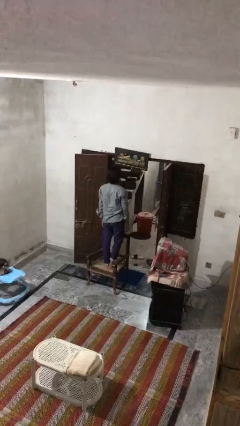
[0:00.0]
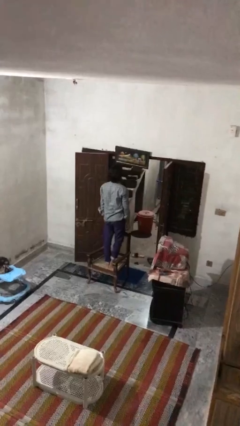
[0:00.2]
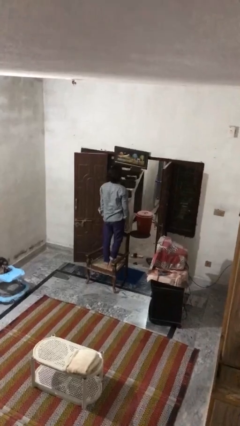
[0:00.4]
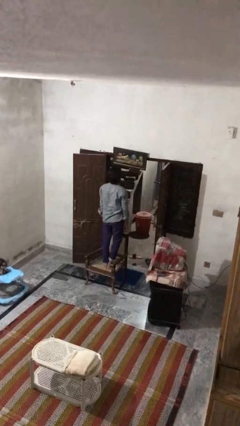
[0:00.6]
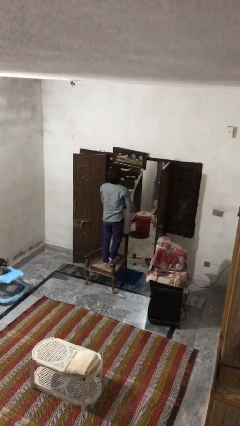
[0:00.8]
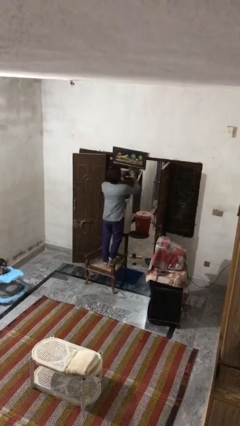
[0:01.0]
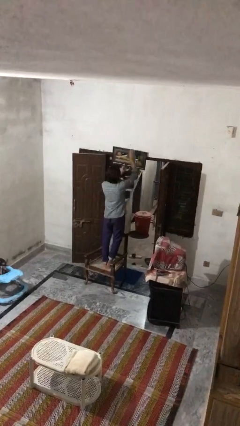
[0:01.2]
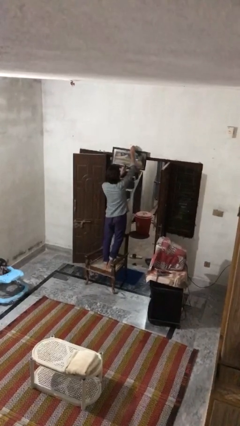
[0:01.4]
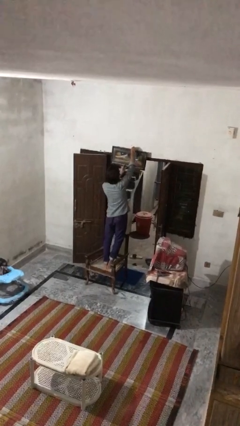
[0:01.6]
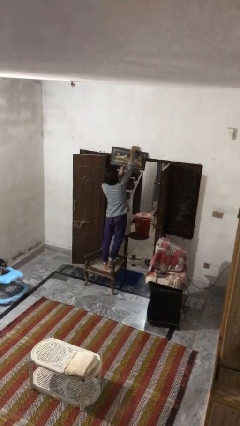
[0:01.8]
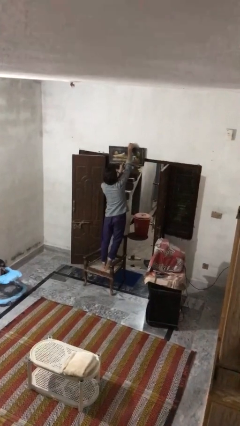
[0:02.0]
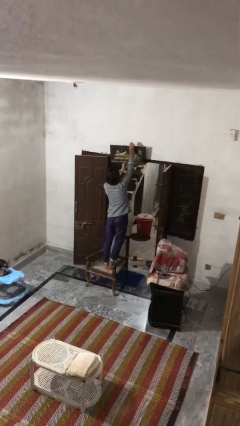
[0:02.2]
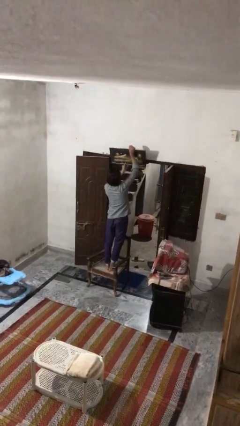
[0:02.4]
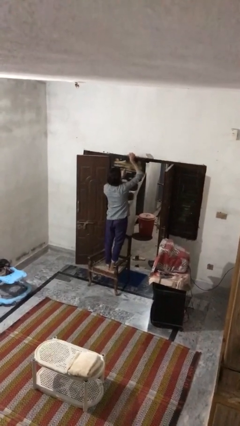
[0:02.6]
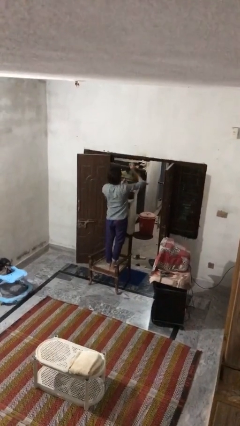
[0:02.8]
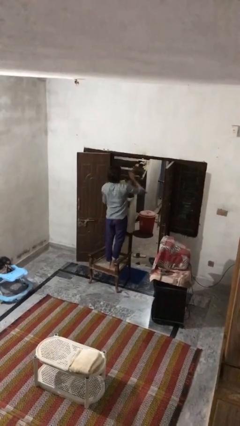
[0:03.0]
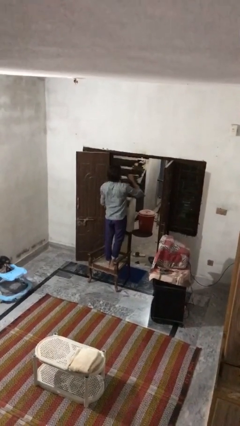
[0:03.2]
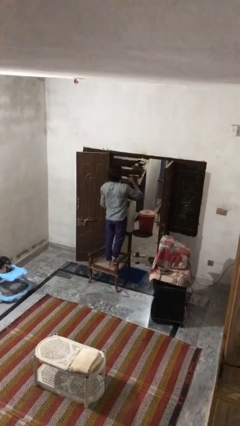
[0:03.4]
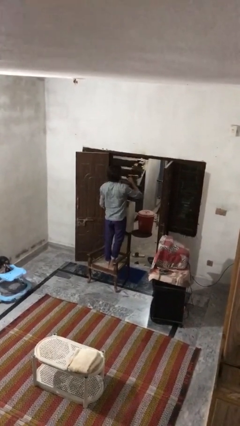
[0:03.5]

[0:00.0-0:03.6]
person takes down picture frame

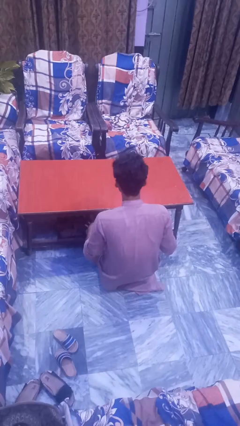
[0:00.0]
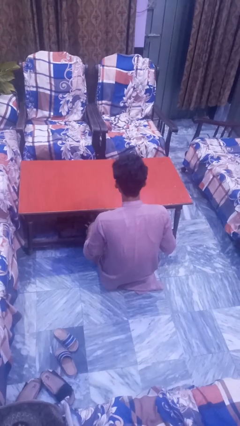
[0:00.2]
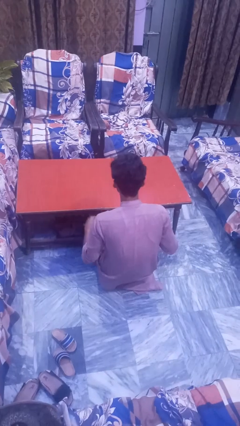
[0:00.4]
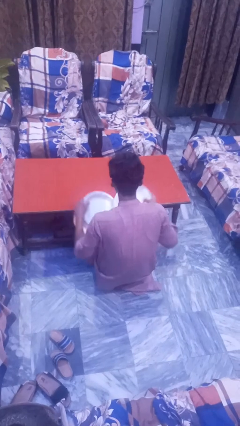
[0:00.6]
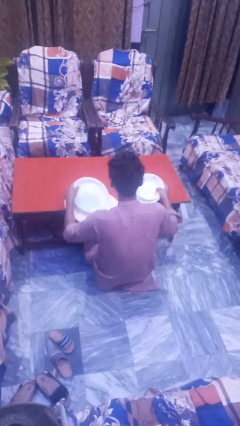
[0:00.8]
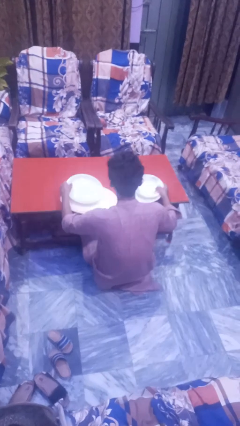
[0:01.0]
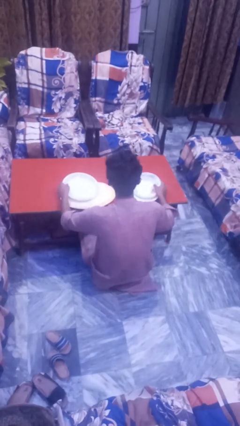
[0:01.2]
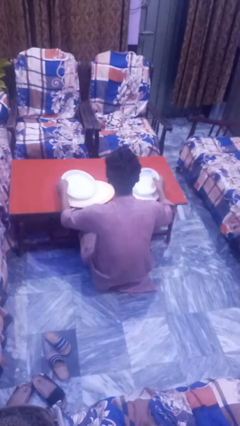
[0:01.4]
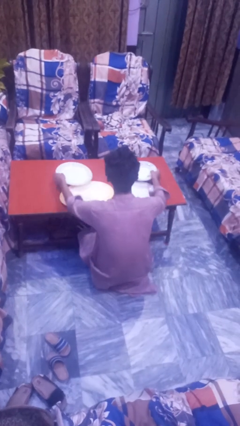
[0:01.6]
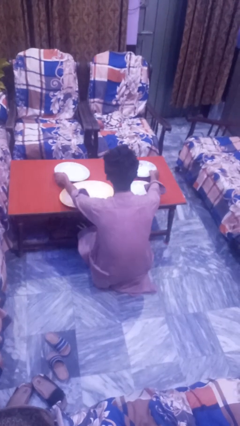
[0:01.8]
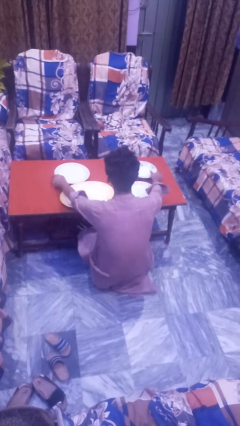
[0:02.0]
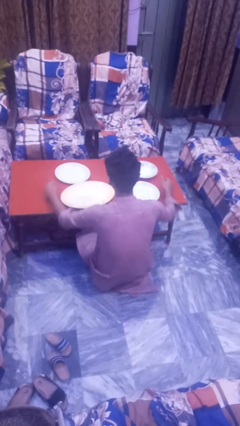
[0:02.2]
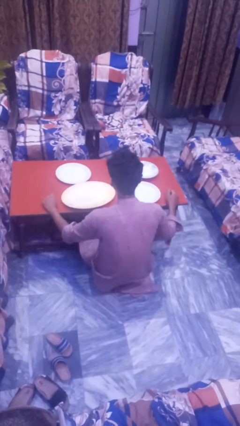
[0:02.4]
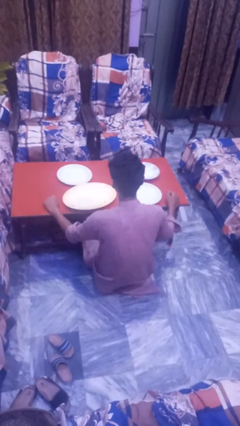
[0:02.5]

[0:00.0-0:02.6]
person sets table

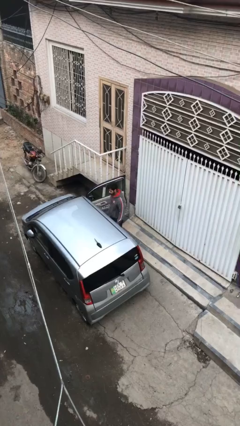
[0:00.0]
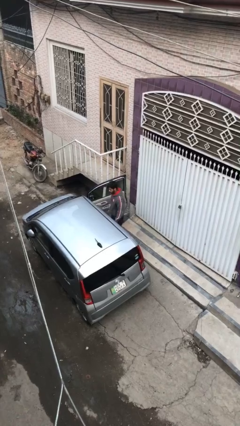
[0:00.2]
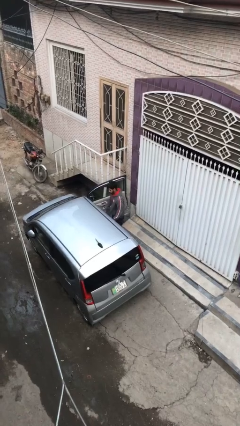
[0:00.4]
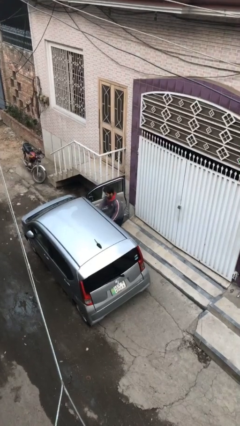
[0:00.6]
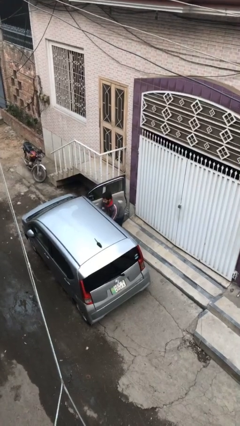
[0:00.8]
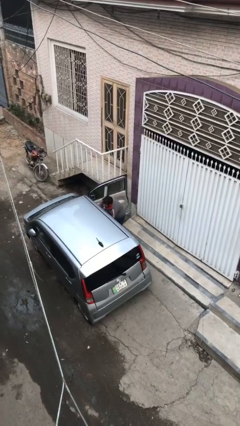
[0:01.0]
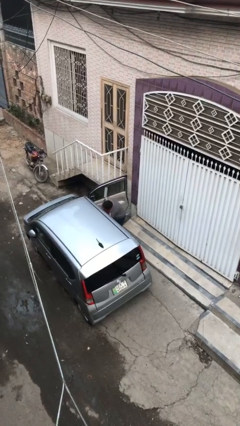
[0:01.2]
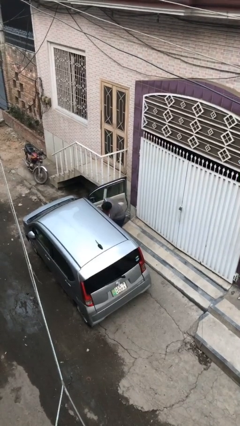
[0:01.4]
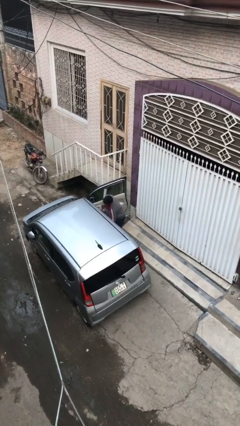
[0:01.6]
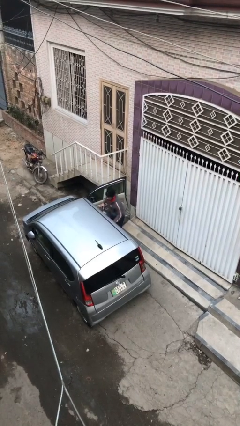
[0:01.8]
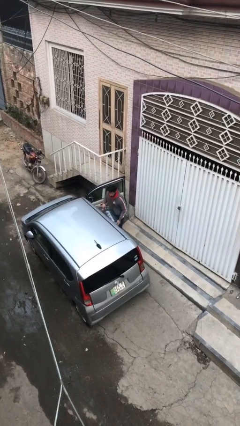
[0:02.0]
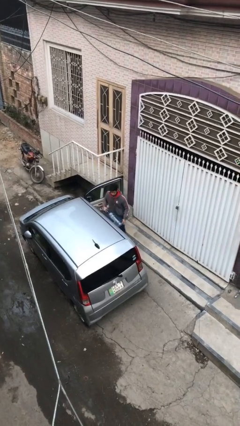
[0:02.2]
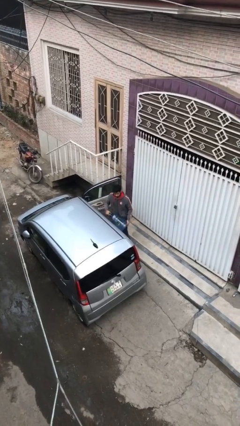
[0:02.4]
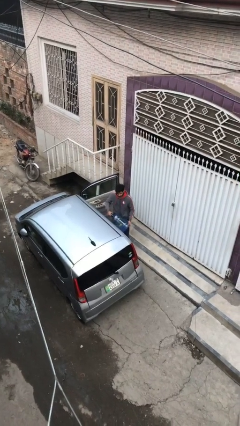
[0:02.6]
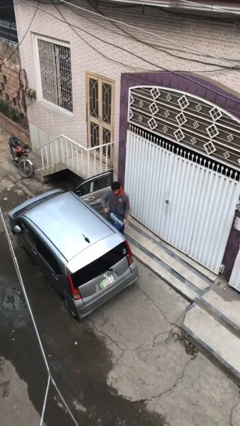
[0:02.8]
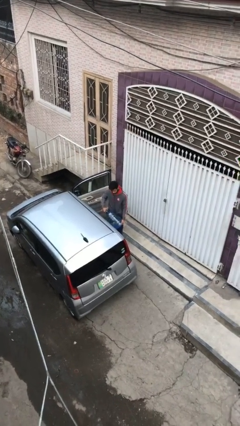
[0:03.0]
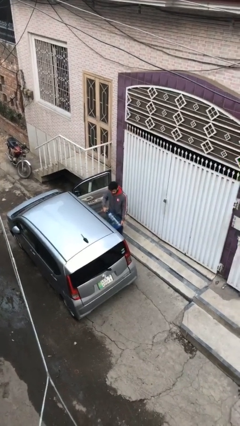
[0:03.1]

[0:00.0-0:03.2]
person unloads car

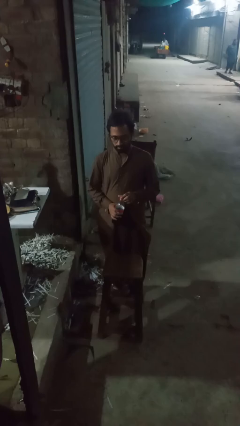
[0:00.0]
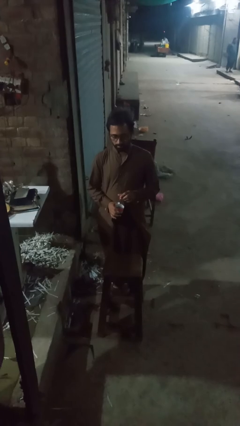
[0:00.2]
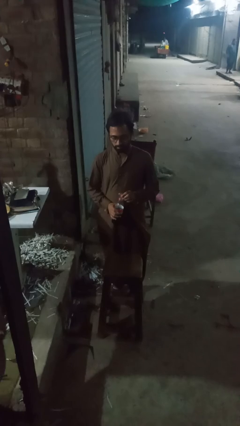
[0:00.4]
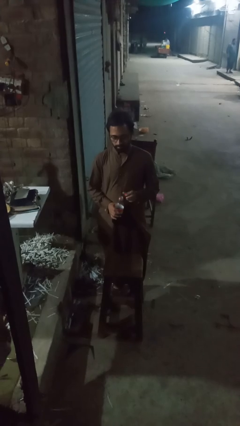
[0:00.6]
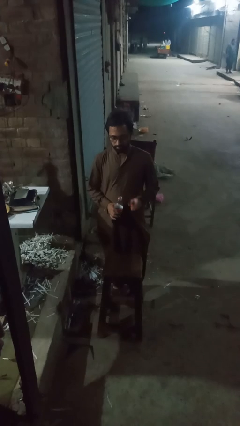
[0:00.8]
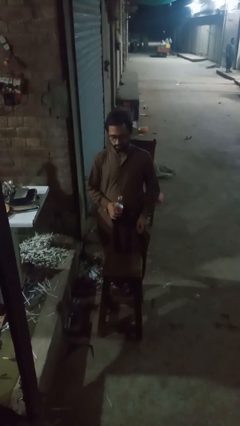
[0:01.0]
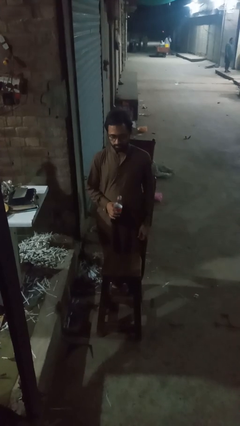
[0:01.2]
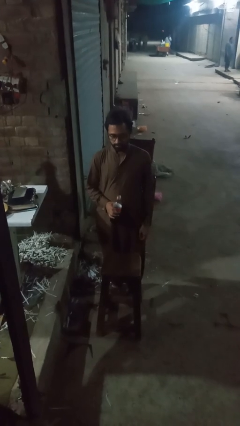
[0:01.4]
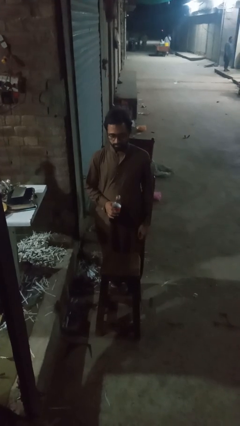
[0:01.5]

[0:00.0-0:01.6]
person unscrews lid from bottle

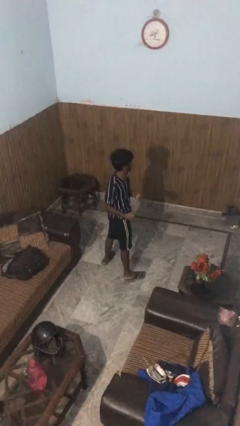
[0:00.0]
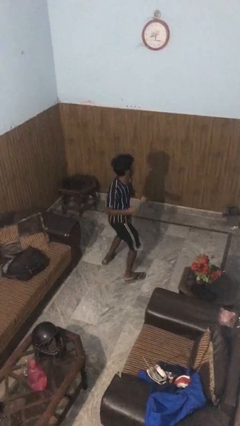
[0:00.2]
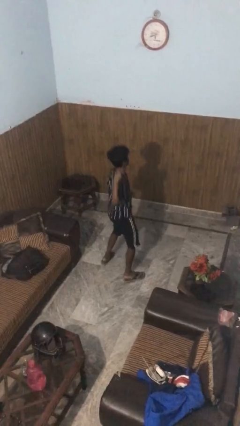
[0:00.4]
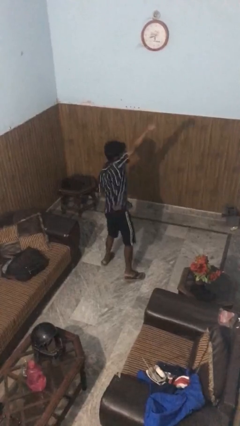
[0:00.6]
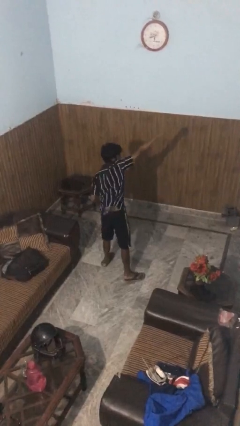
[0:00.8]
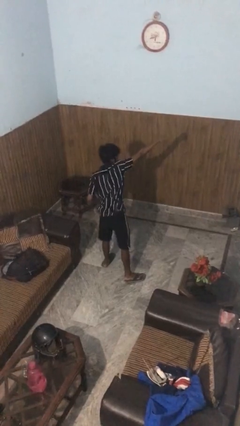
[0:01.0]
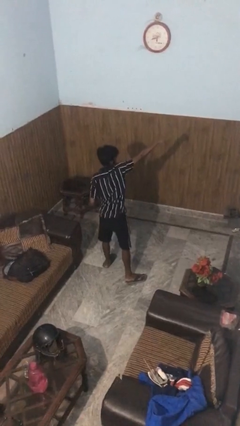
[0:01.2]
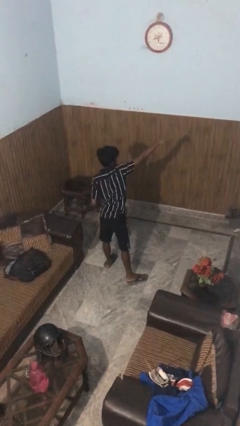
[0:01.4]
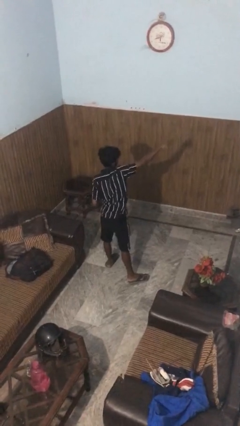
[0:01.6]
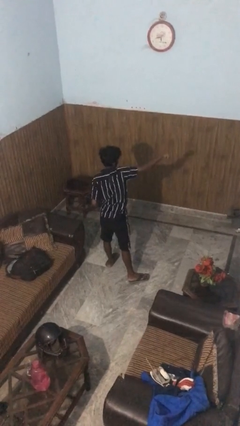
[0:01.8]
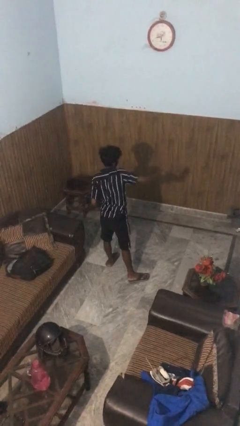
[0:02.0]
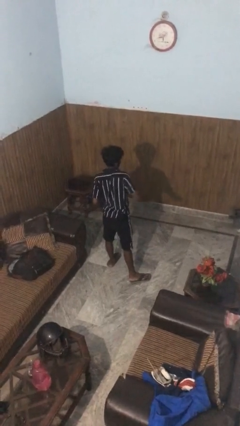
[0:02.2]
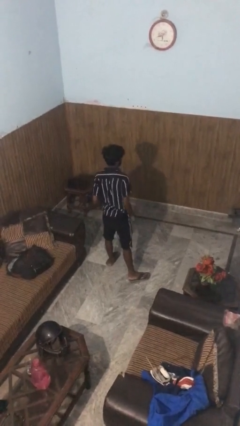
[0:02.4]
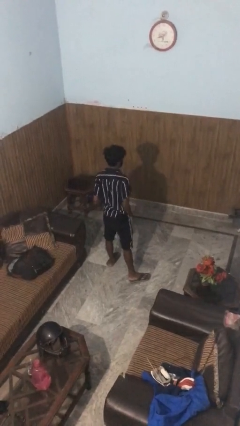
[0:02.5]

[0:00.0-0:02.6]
person punches

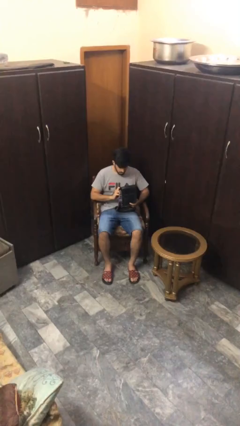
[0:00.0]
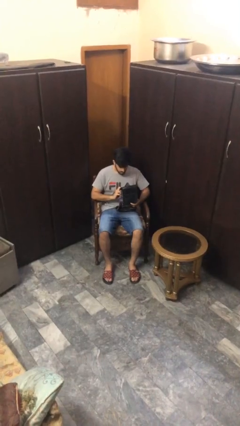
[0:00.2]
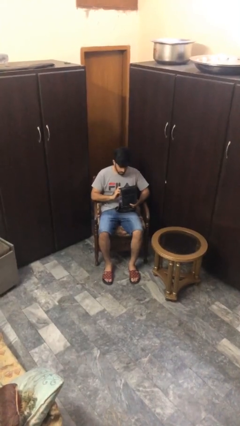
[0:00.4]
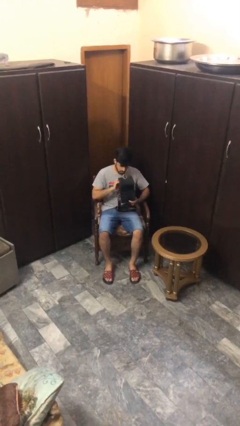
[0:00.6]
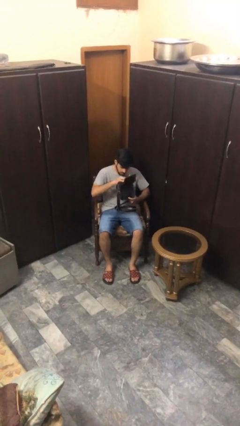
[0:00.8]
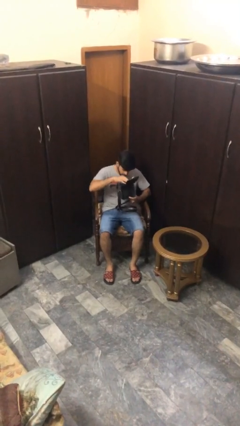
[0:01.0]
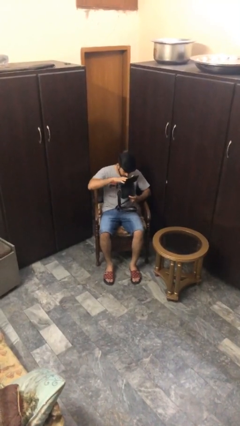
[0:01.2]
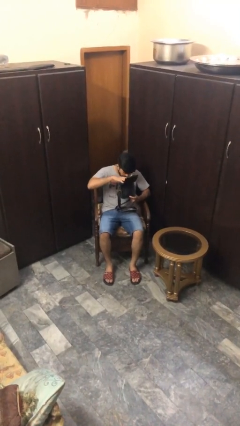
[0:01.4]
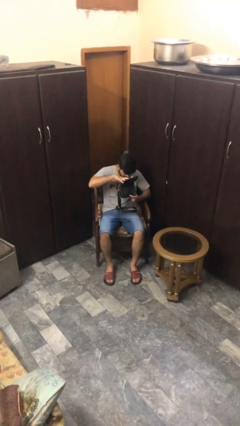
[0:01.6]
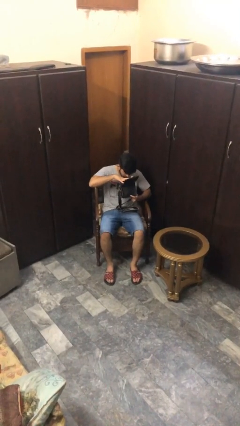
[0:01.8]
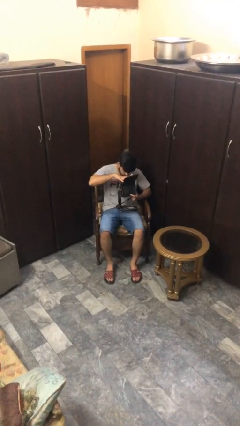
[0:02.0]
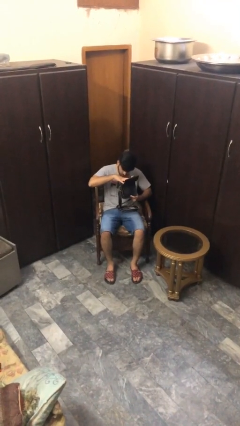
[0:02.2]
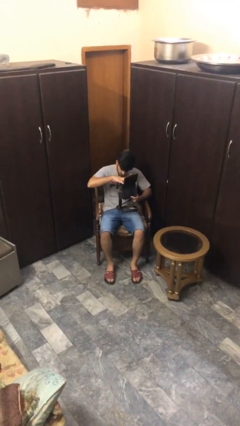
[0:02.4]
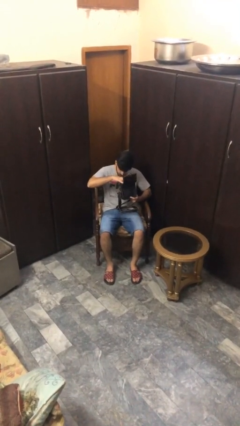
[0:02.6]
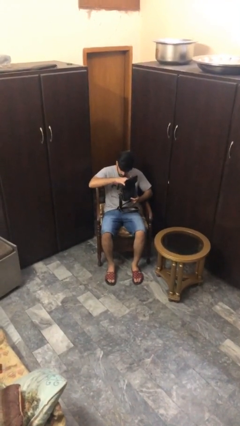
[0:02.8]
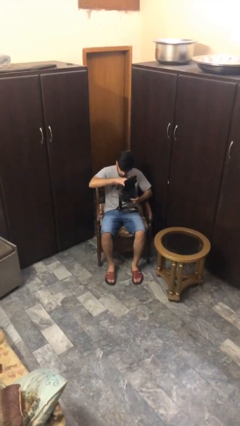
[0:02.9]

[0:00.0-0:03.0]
person searches in purse

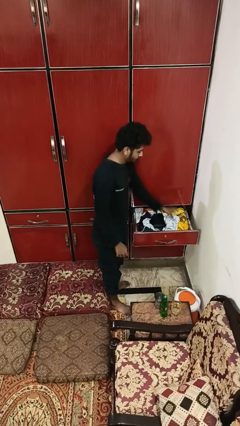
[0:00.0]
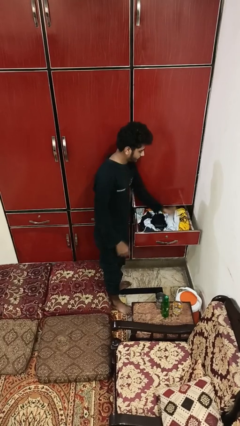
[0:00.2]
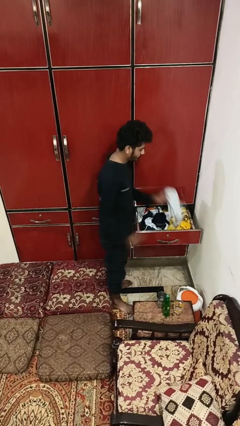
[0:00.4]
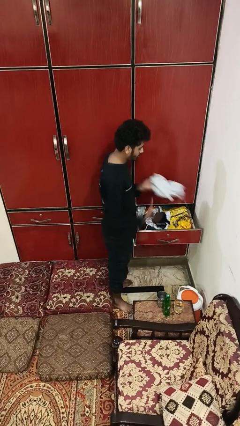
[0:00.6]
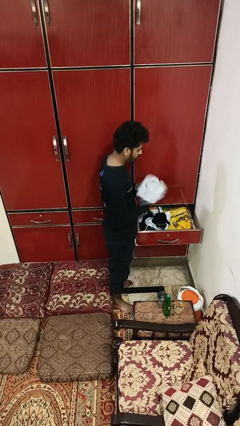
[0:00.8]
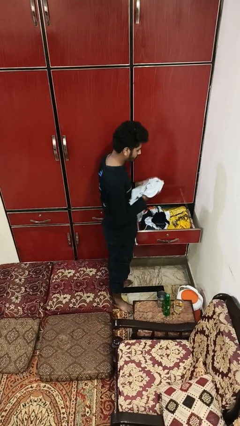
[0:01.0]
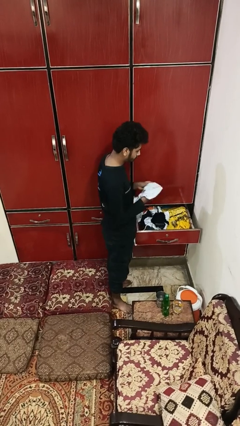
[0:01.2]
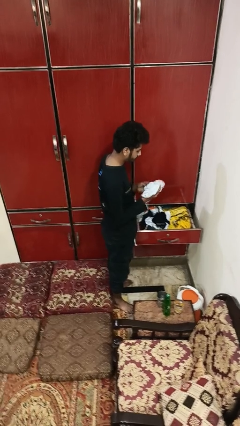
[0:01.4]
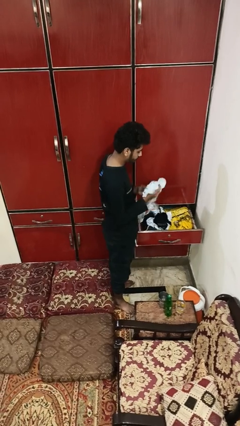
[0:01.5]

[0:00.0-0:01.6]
person takes clothes from dresser
